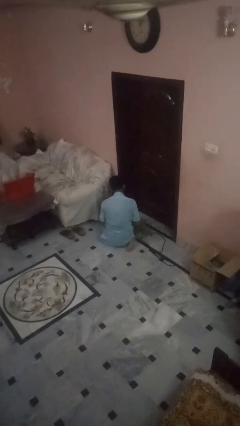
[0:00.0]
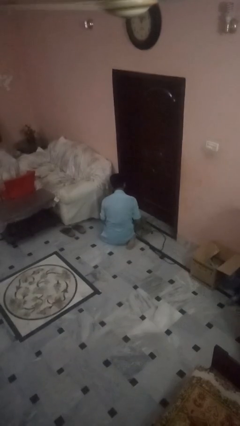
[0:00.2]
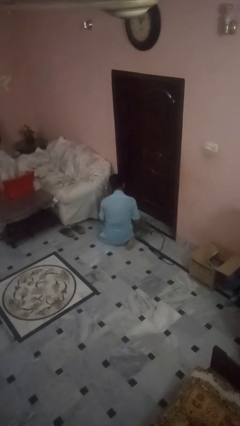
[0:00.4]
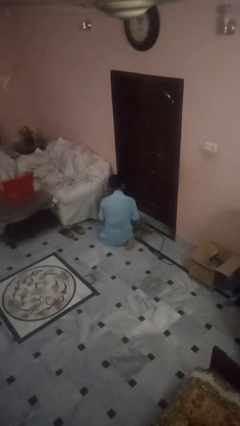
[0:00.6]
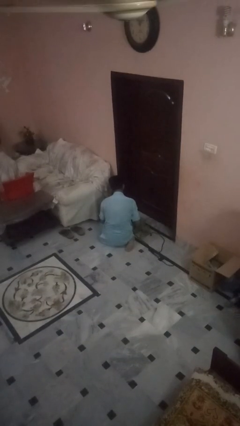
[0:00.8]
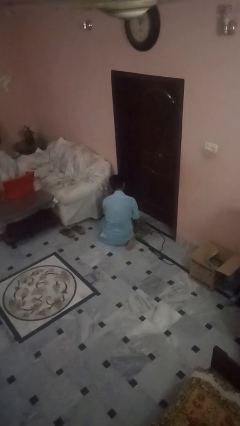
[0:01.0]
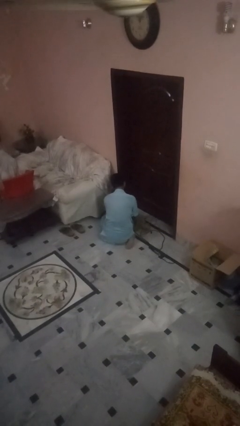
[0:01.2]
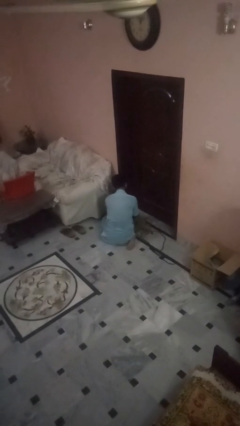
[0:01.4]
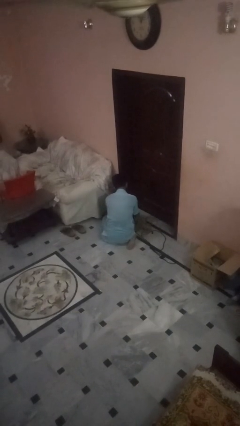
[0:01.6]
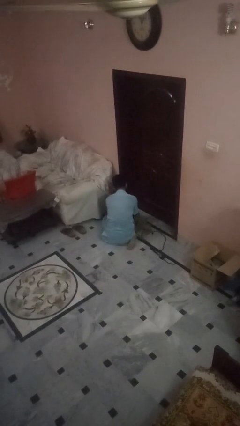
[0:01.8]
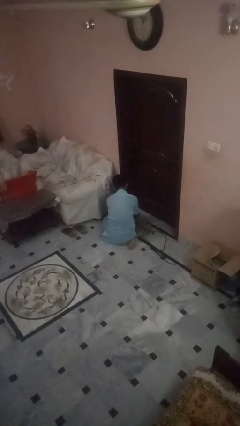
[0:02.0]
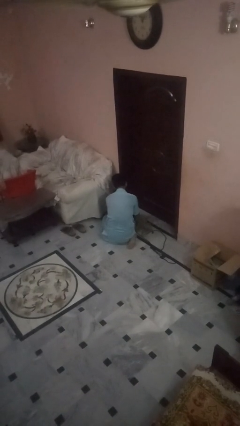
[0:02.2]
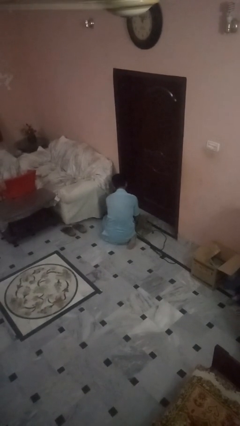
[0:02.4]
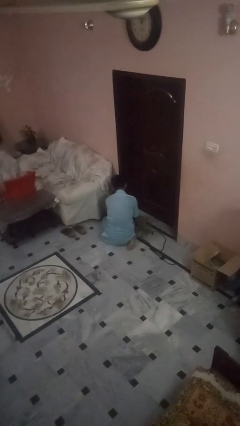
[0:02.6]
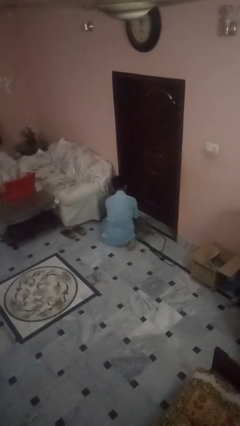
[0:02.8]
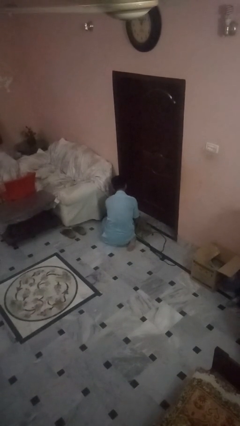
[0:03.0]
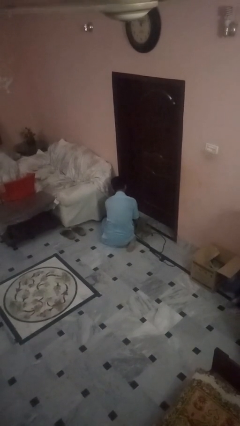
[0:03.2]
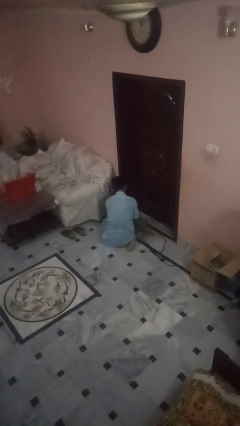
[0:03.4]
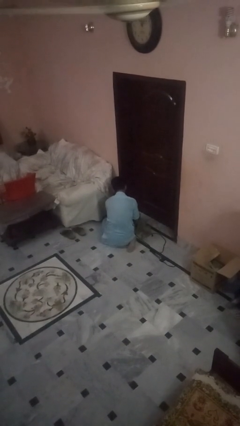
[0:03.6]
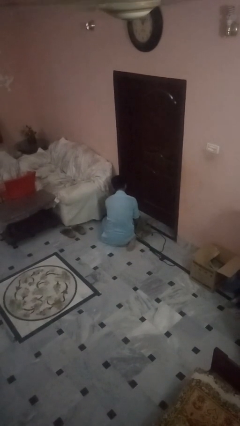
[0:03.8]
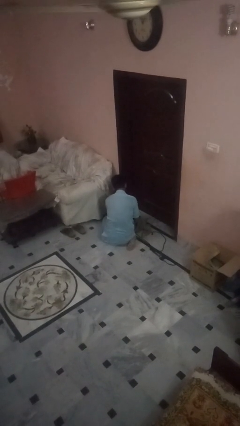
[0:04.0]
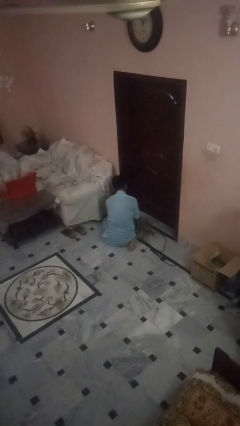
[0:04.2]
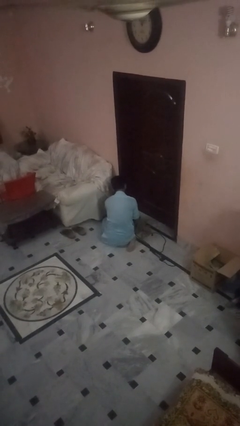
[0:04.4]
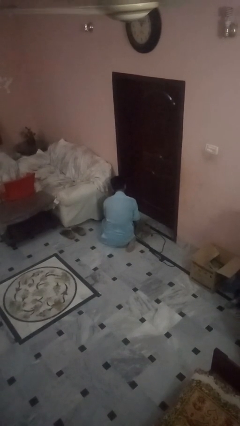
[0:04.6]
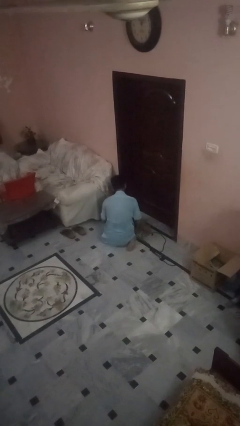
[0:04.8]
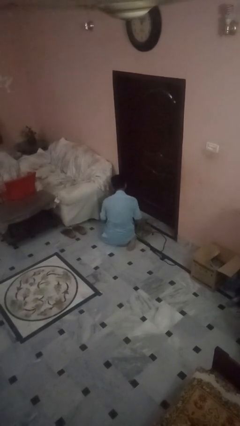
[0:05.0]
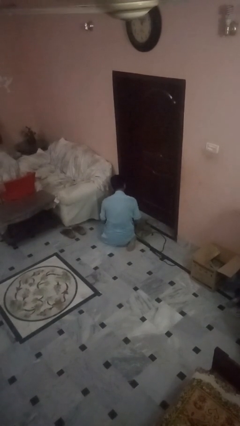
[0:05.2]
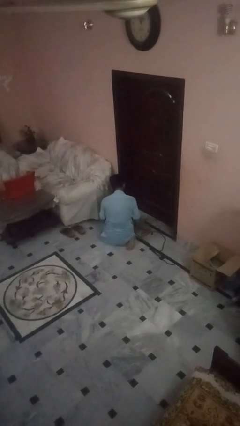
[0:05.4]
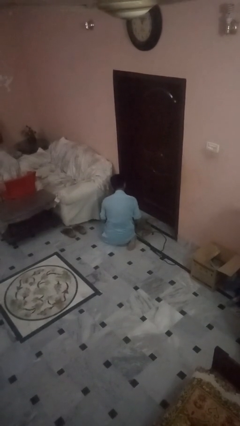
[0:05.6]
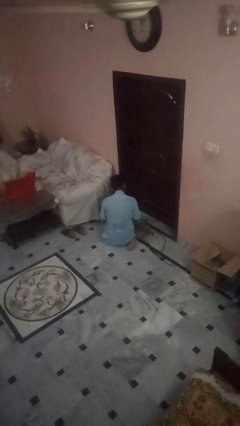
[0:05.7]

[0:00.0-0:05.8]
person attaches leash to dog

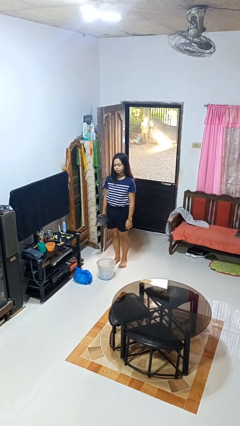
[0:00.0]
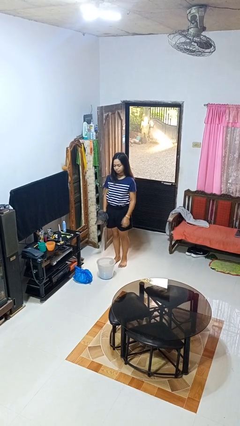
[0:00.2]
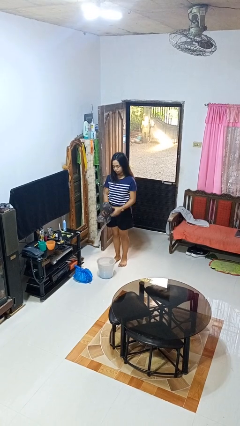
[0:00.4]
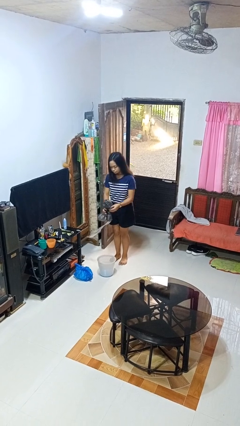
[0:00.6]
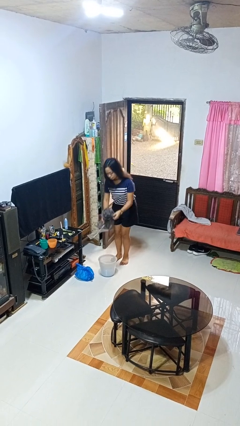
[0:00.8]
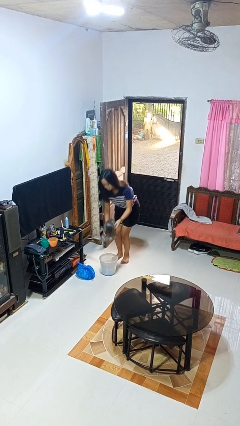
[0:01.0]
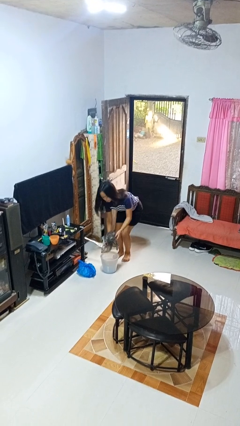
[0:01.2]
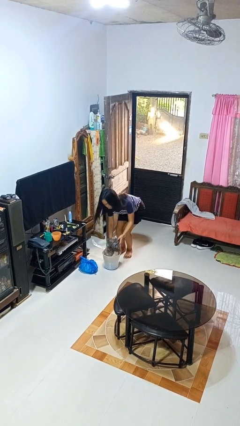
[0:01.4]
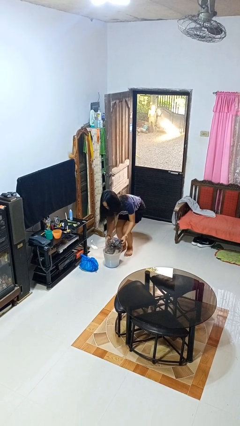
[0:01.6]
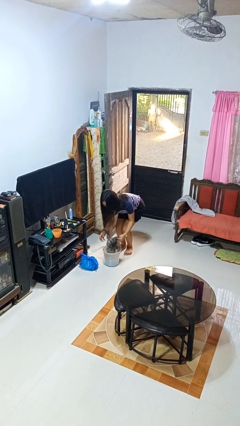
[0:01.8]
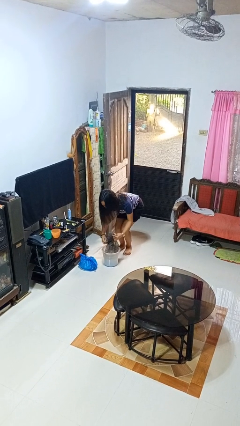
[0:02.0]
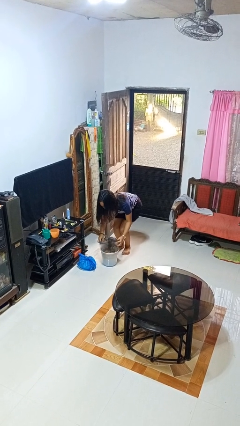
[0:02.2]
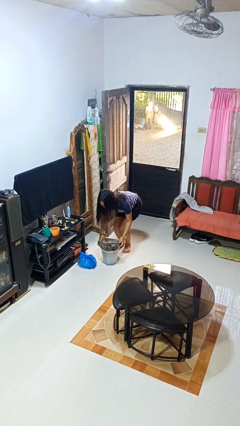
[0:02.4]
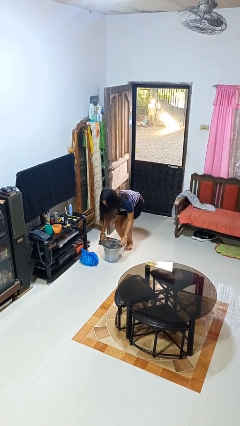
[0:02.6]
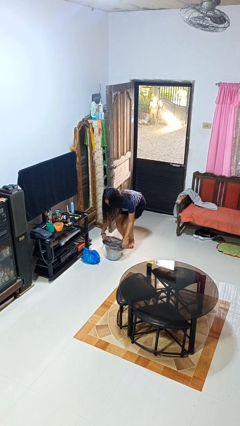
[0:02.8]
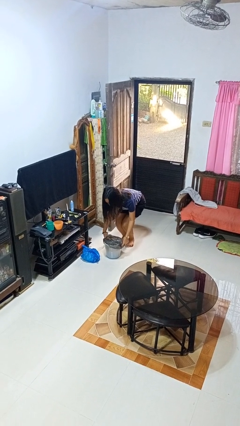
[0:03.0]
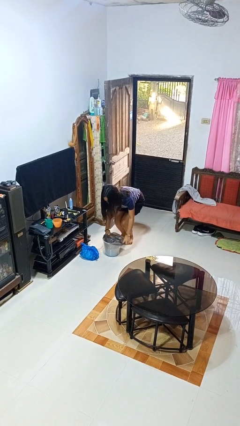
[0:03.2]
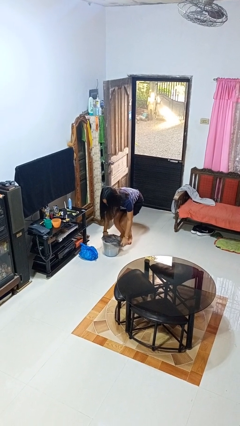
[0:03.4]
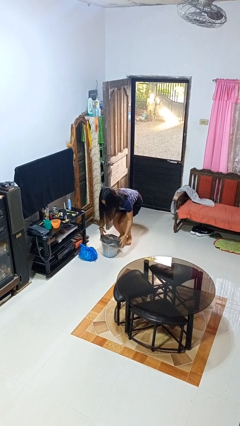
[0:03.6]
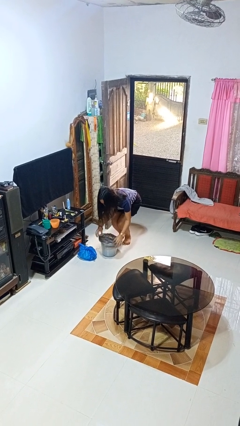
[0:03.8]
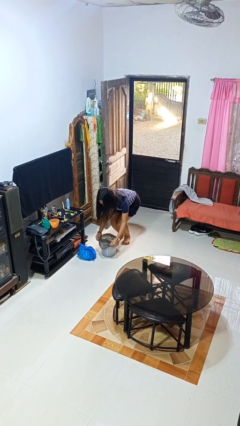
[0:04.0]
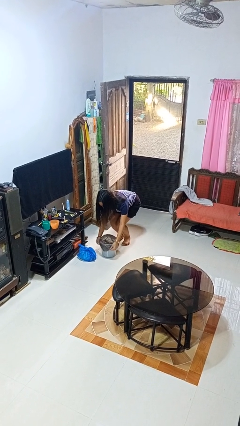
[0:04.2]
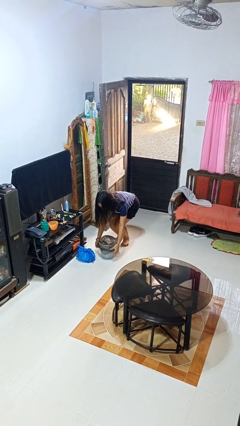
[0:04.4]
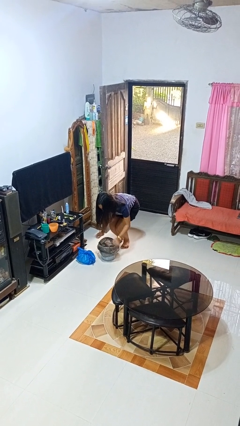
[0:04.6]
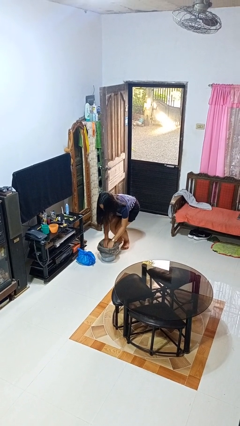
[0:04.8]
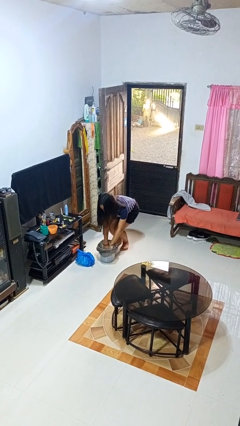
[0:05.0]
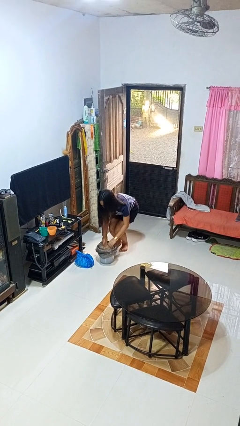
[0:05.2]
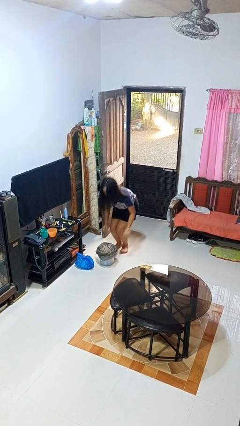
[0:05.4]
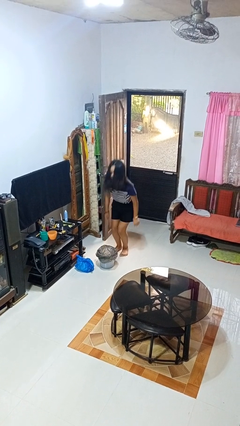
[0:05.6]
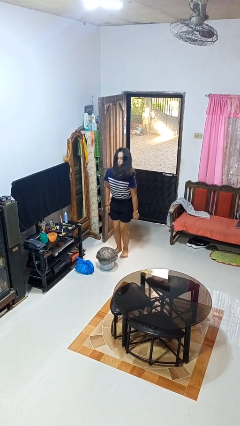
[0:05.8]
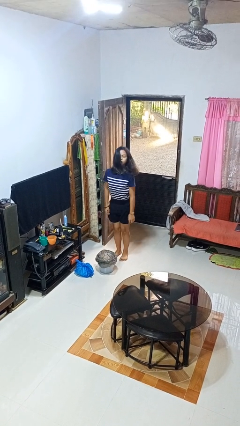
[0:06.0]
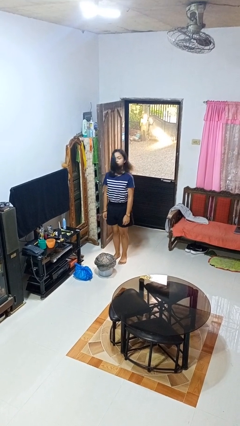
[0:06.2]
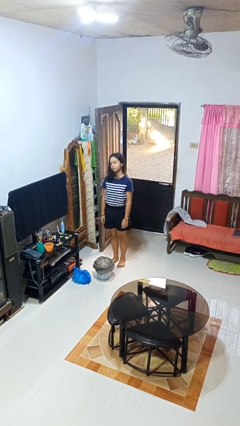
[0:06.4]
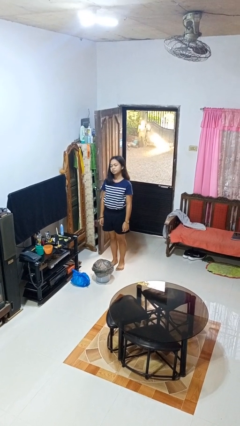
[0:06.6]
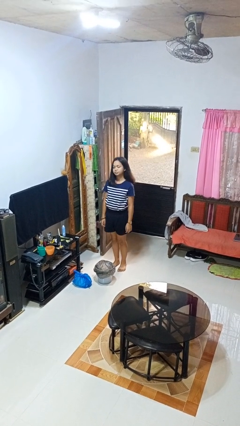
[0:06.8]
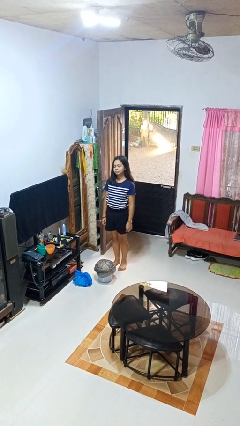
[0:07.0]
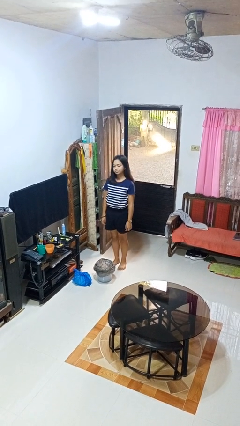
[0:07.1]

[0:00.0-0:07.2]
person inserts trashbag into trashcan

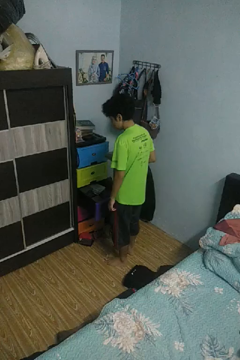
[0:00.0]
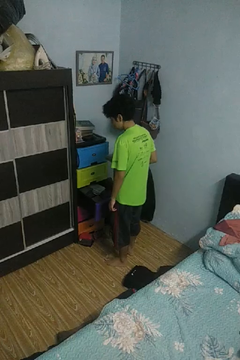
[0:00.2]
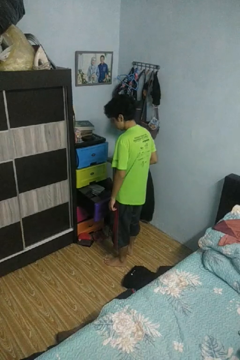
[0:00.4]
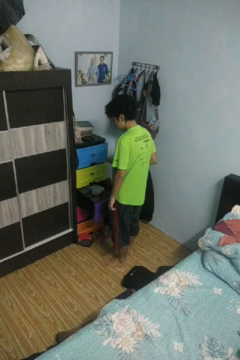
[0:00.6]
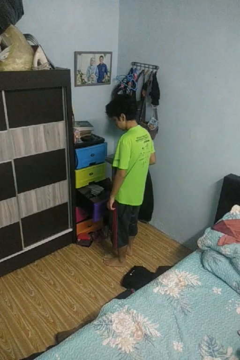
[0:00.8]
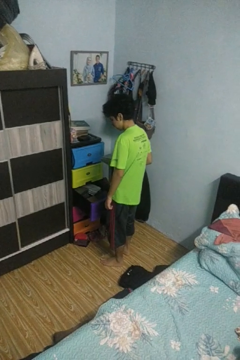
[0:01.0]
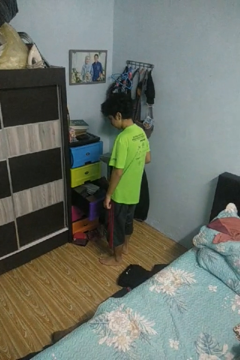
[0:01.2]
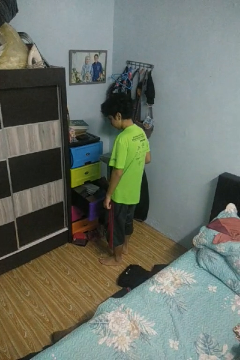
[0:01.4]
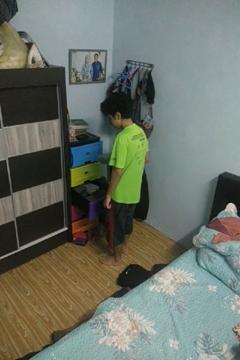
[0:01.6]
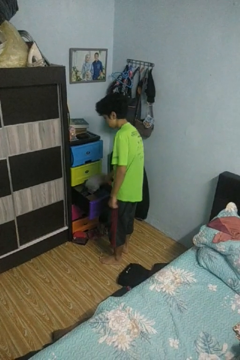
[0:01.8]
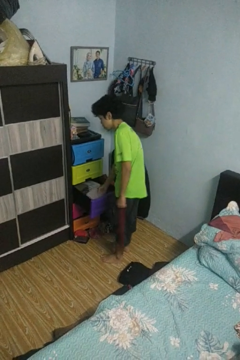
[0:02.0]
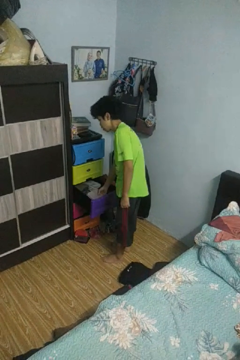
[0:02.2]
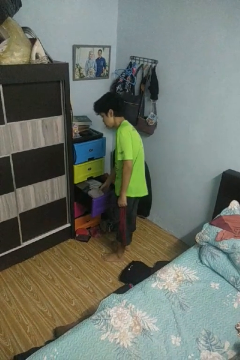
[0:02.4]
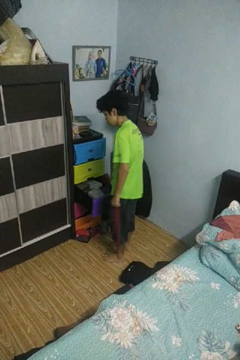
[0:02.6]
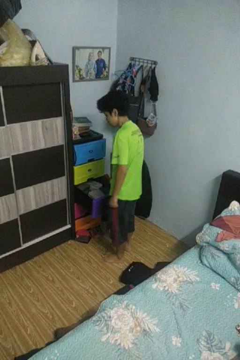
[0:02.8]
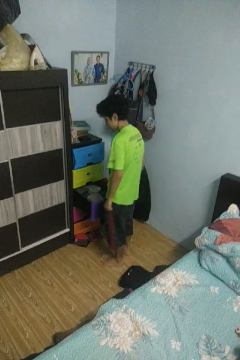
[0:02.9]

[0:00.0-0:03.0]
person puts clothes into dresser

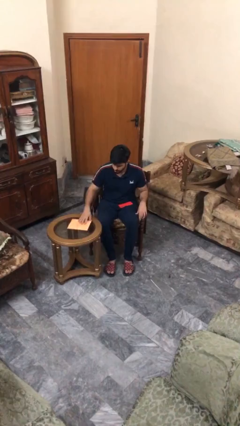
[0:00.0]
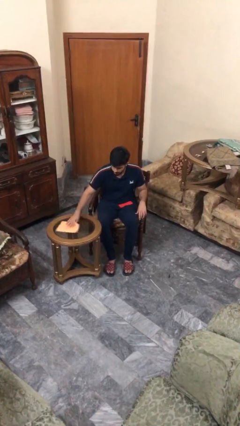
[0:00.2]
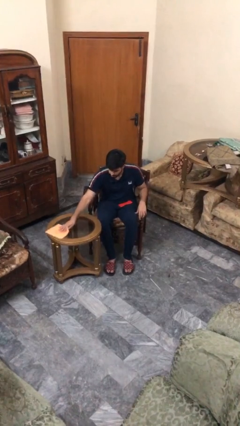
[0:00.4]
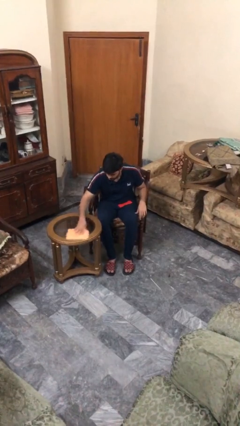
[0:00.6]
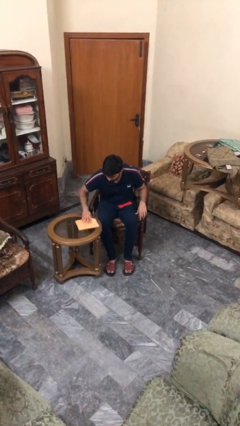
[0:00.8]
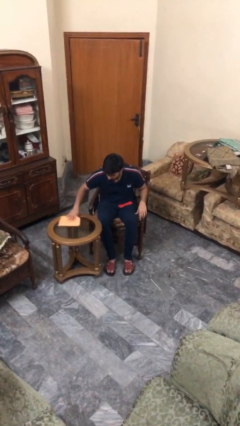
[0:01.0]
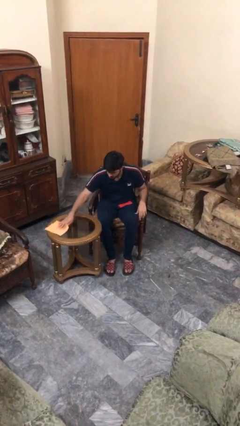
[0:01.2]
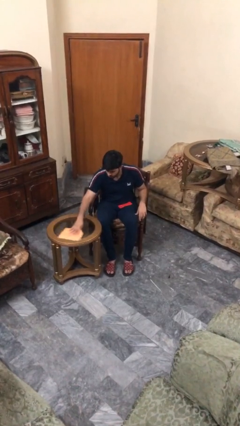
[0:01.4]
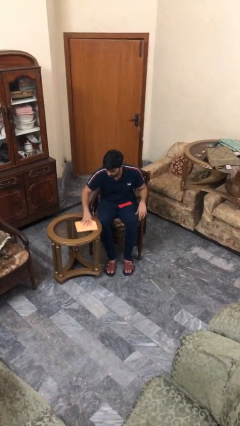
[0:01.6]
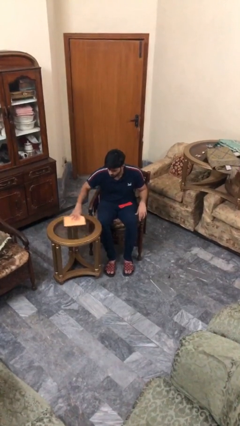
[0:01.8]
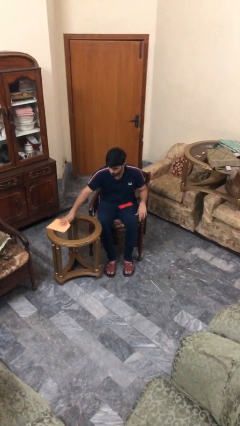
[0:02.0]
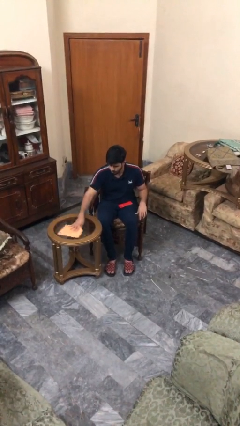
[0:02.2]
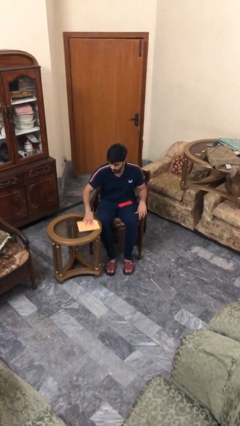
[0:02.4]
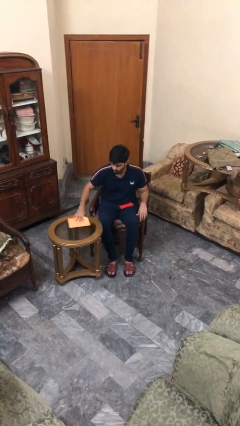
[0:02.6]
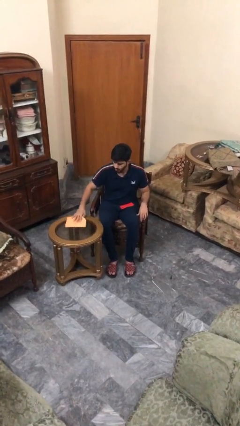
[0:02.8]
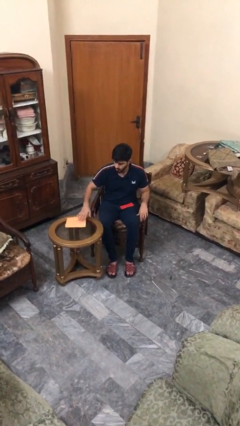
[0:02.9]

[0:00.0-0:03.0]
person cleans table with rag
